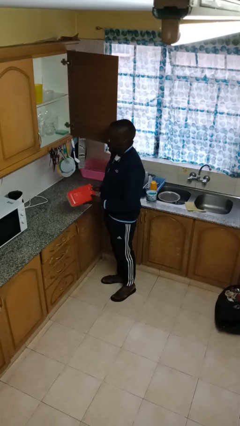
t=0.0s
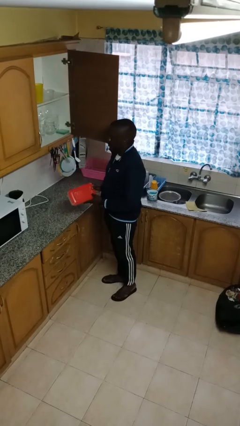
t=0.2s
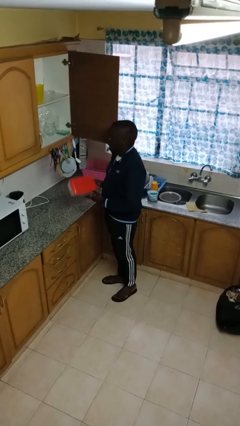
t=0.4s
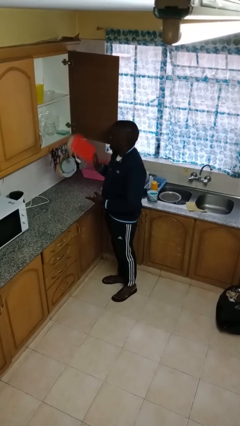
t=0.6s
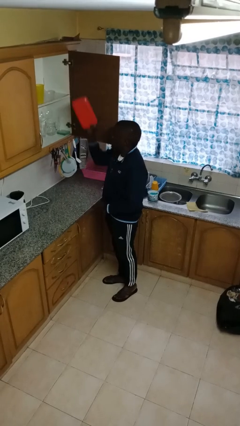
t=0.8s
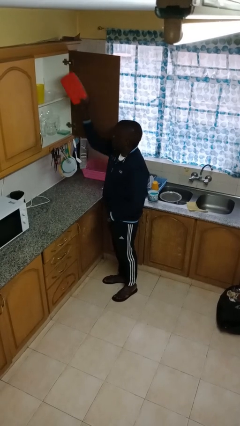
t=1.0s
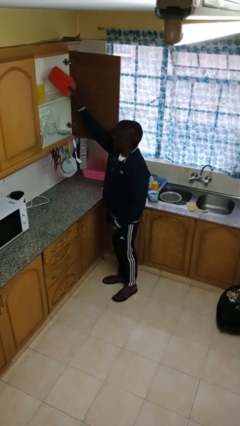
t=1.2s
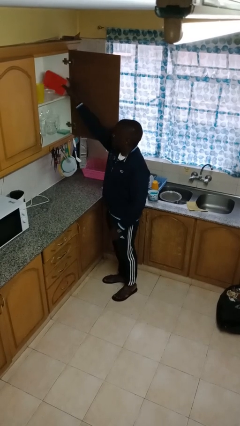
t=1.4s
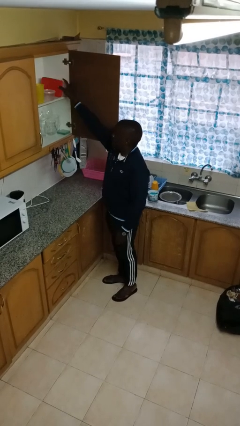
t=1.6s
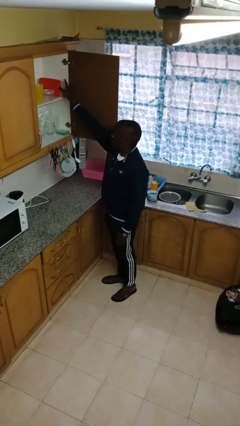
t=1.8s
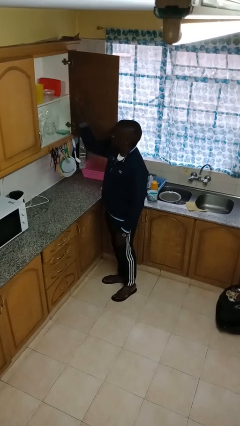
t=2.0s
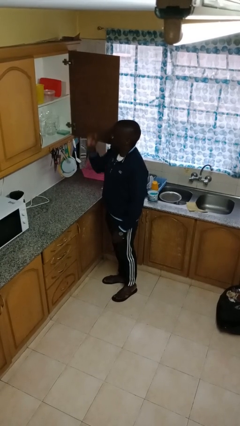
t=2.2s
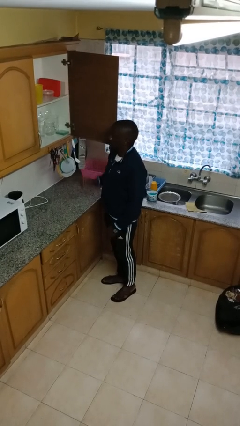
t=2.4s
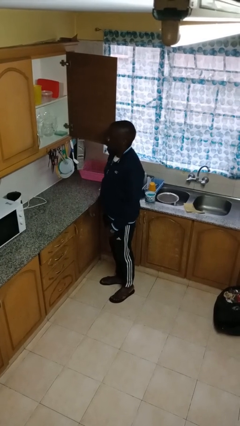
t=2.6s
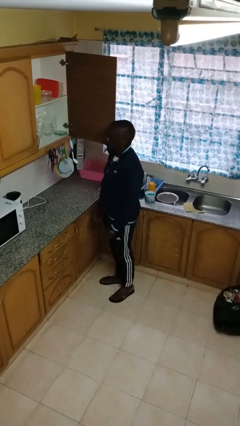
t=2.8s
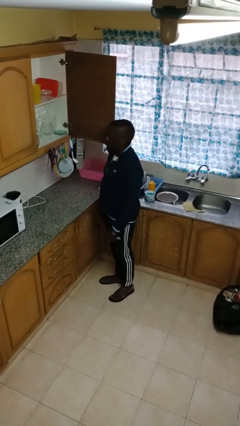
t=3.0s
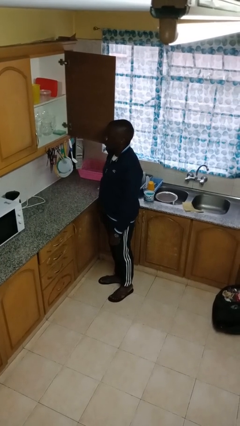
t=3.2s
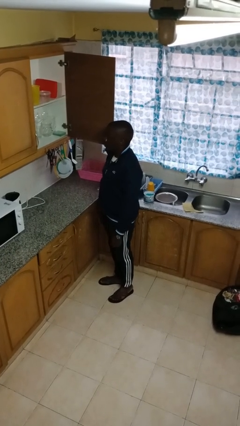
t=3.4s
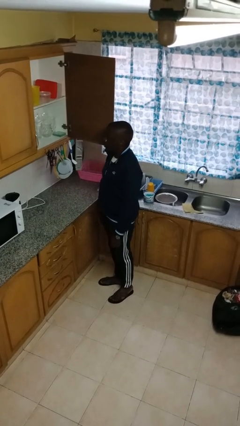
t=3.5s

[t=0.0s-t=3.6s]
person puts down object on shelf

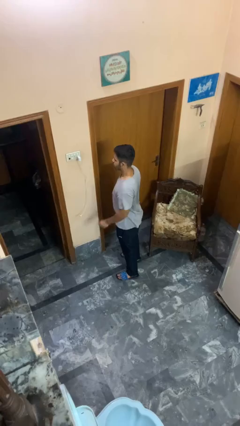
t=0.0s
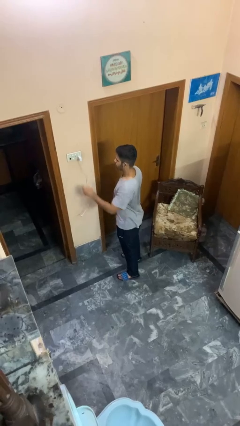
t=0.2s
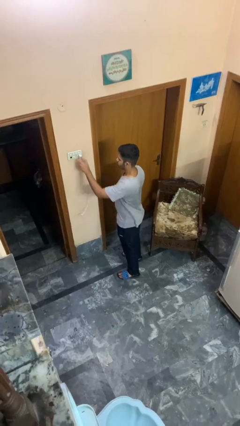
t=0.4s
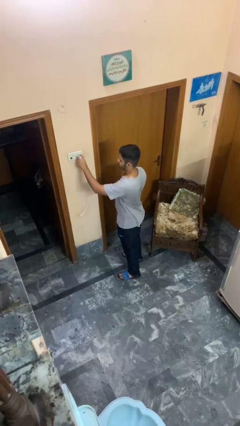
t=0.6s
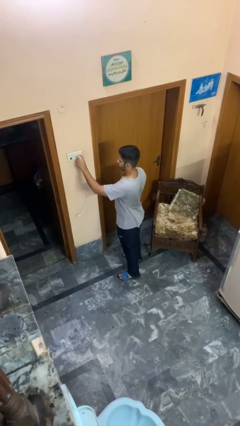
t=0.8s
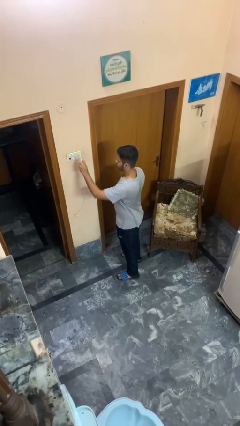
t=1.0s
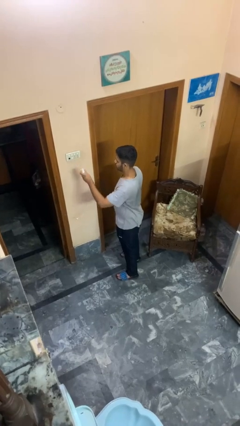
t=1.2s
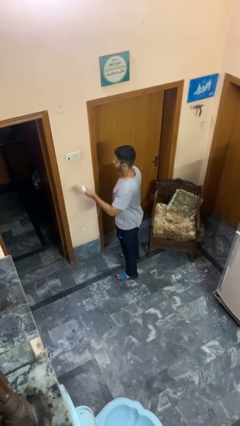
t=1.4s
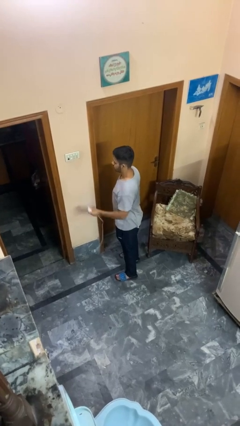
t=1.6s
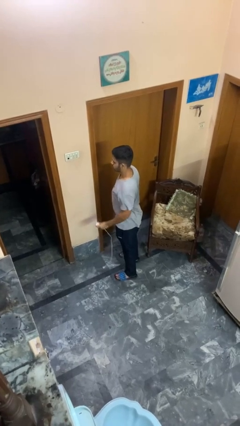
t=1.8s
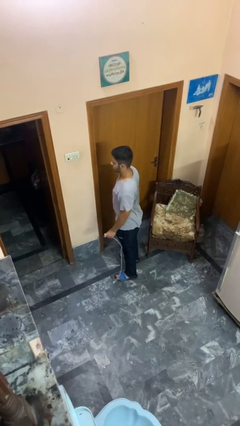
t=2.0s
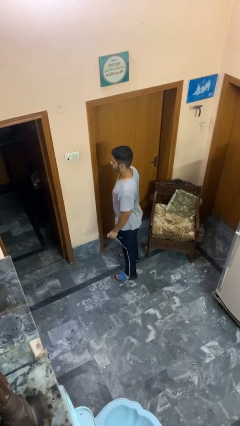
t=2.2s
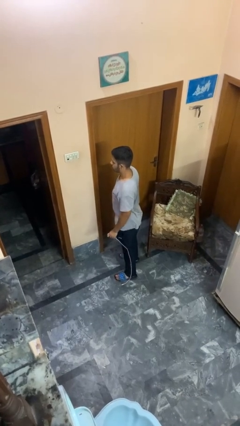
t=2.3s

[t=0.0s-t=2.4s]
person unplugs from electrical socket

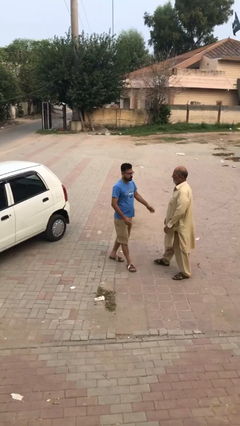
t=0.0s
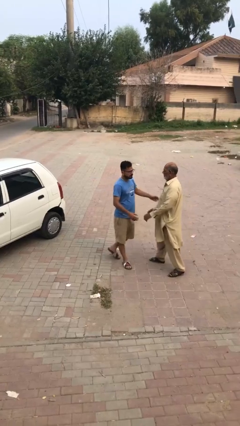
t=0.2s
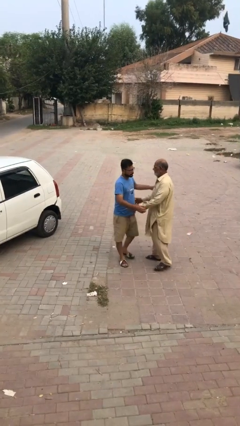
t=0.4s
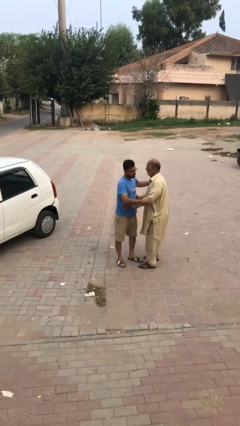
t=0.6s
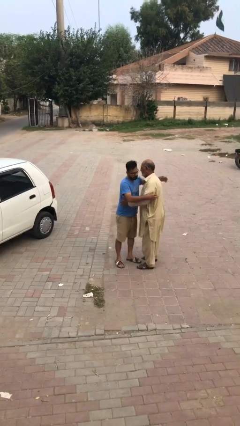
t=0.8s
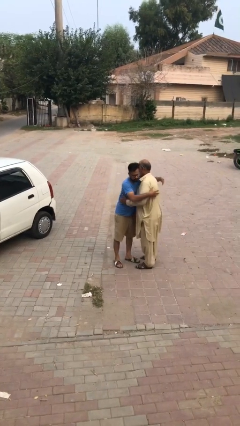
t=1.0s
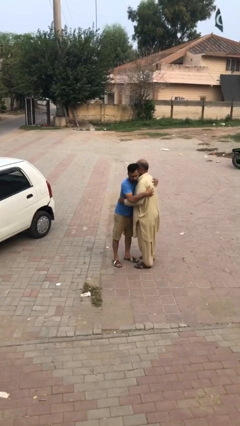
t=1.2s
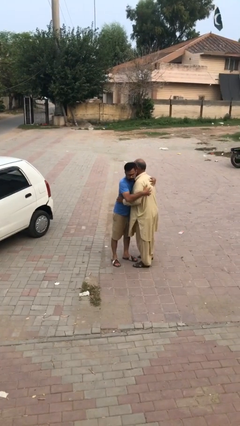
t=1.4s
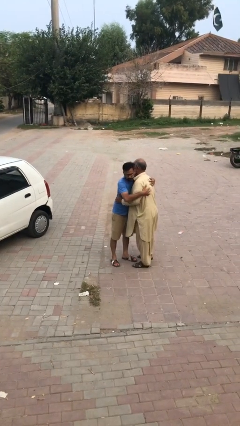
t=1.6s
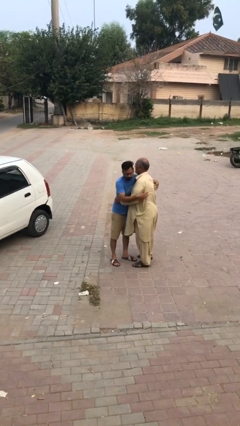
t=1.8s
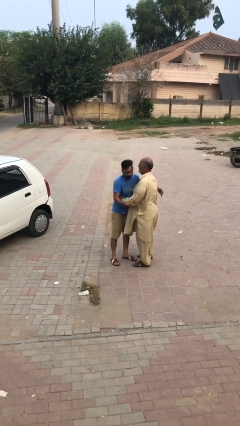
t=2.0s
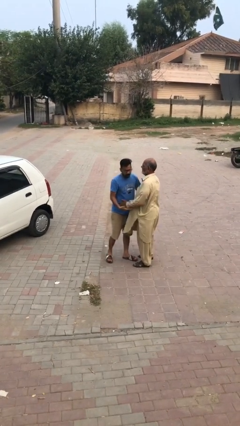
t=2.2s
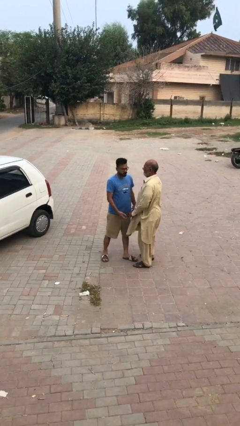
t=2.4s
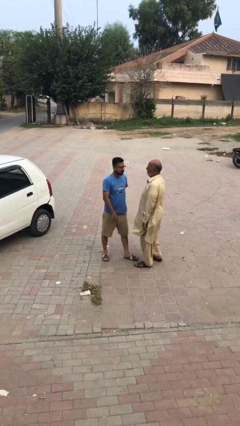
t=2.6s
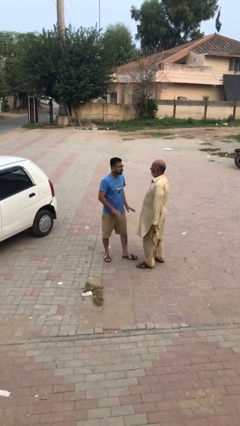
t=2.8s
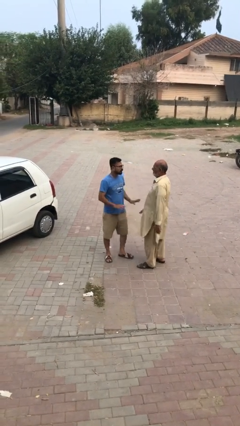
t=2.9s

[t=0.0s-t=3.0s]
person embraces person

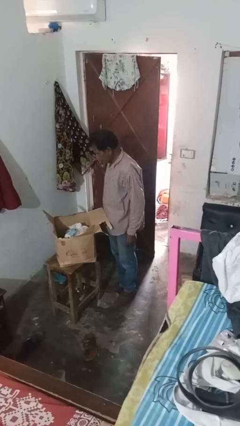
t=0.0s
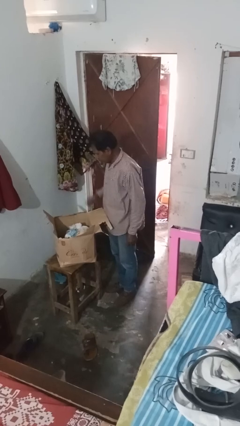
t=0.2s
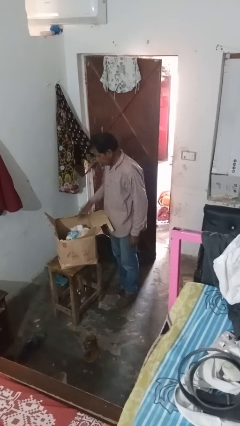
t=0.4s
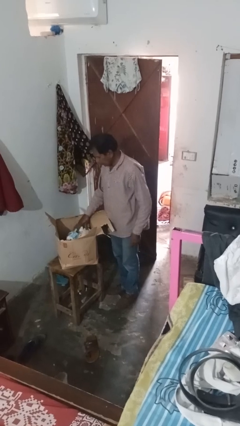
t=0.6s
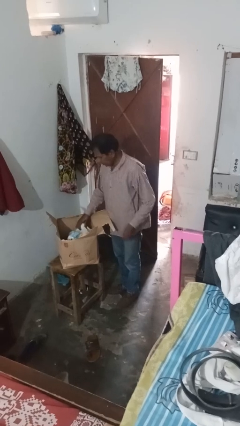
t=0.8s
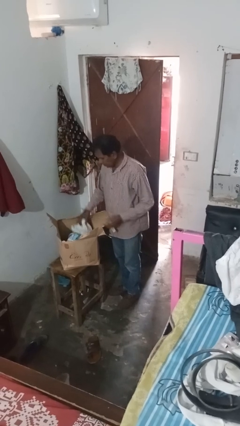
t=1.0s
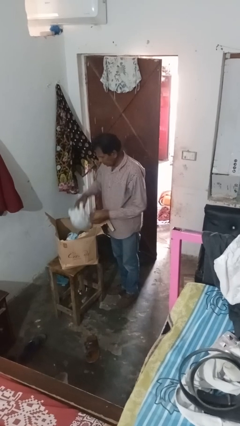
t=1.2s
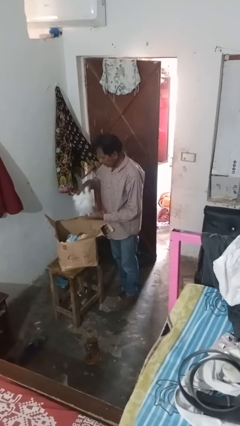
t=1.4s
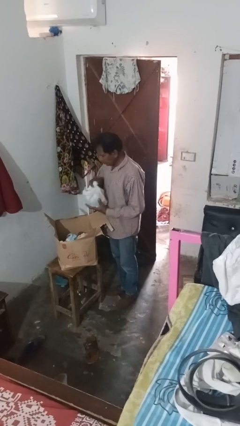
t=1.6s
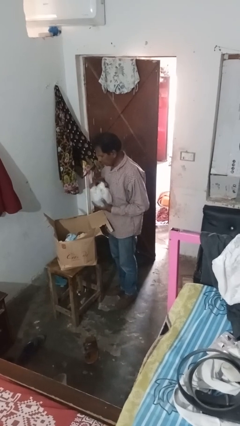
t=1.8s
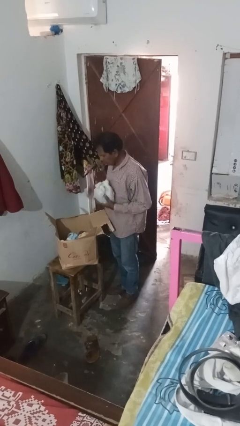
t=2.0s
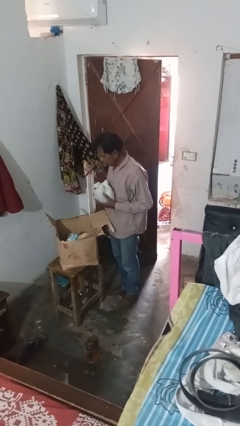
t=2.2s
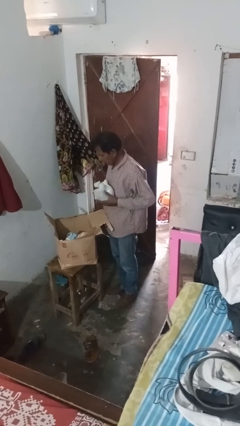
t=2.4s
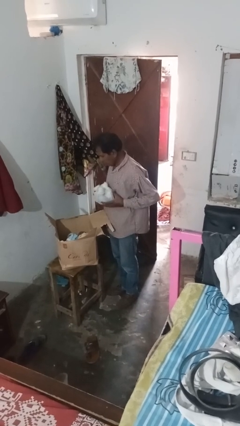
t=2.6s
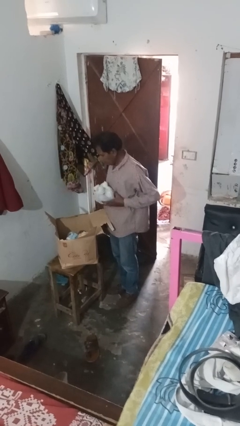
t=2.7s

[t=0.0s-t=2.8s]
person takes object from box

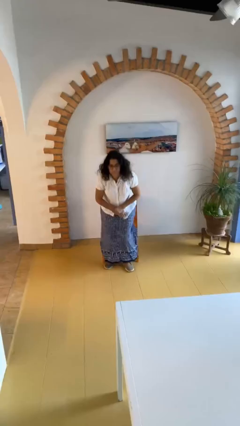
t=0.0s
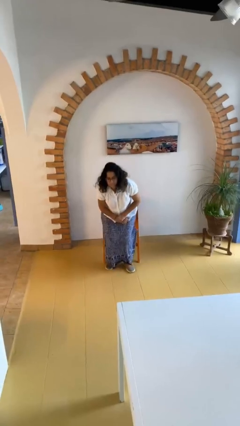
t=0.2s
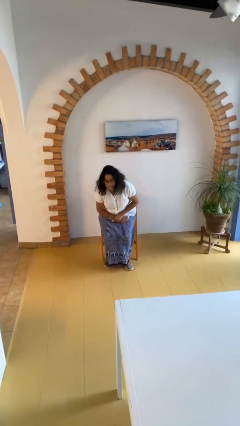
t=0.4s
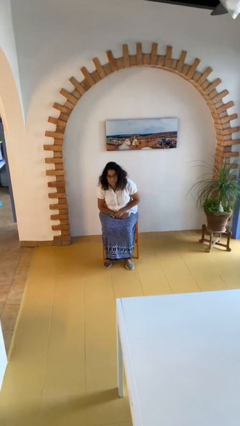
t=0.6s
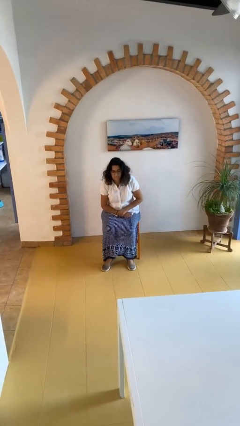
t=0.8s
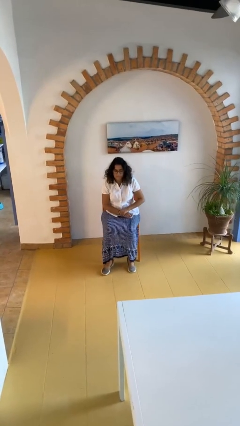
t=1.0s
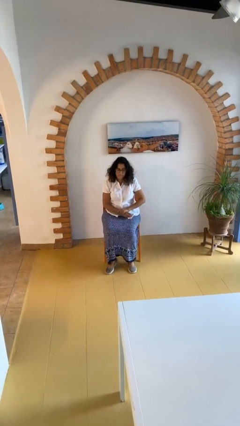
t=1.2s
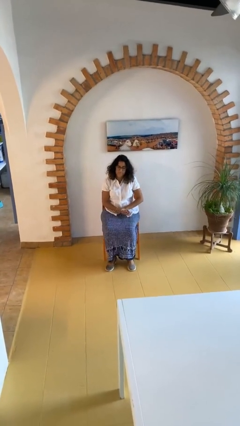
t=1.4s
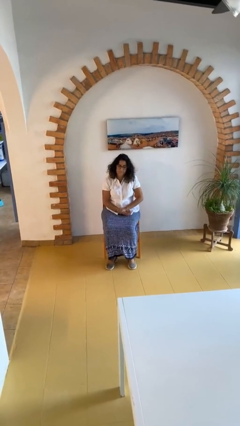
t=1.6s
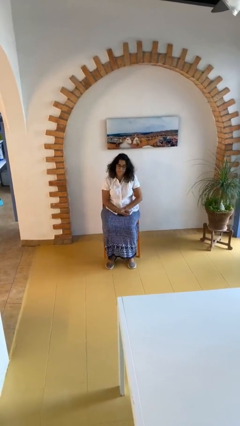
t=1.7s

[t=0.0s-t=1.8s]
person sits down

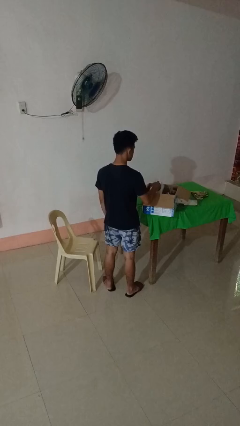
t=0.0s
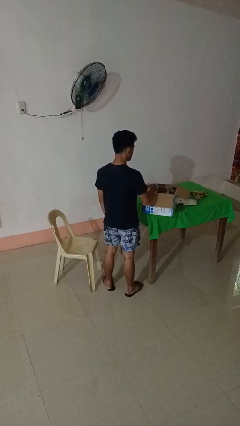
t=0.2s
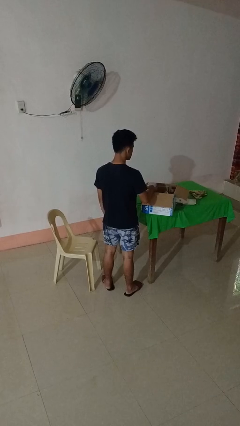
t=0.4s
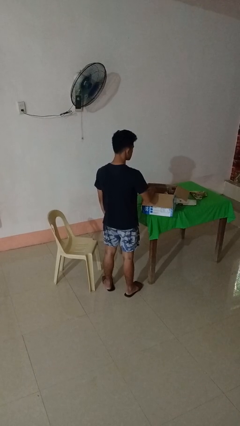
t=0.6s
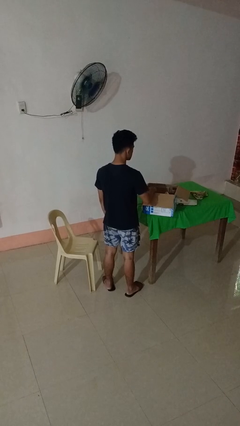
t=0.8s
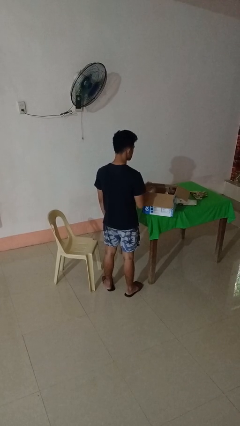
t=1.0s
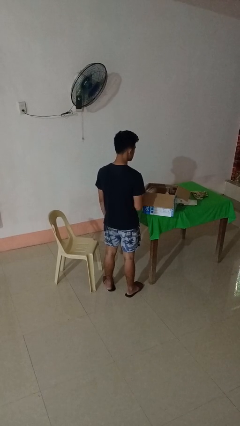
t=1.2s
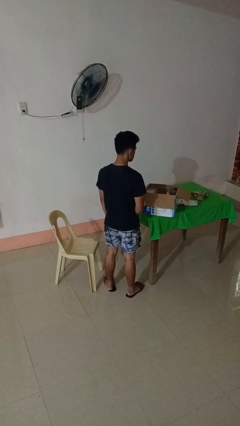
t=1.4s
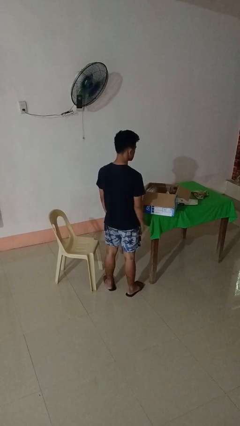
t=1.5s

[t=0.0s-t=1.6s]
person puts object into box

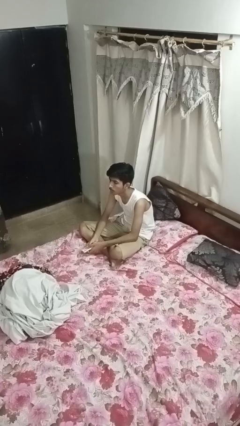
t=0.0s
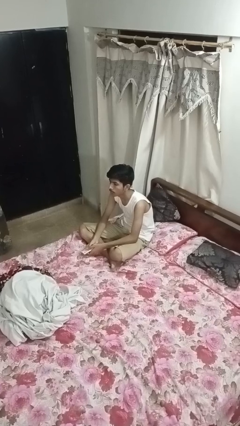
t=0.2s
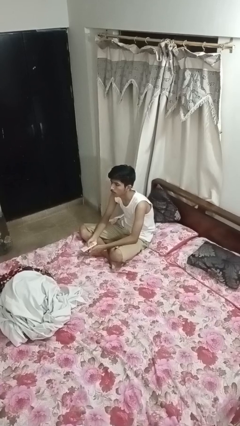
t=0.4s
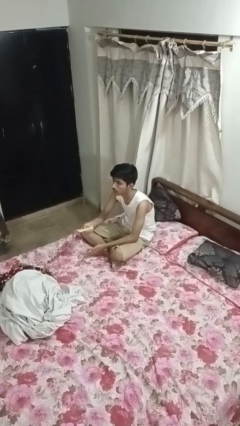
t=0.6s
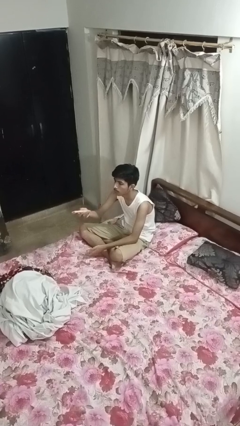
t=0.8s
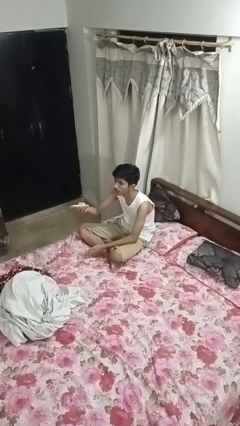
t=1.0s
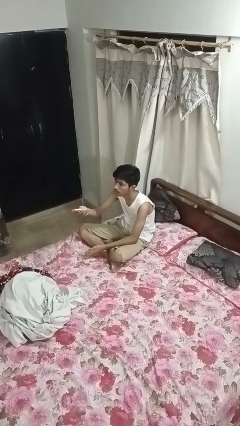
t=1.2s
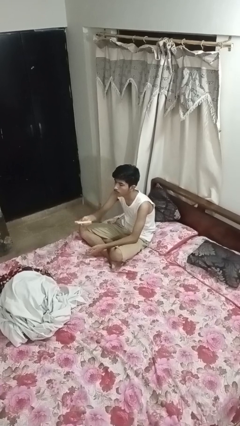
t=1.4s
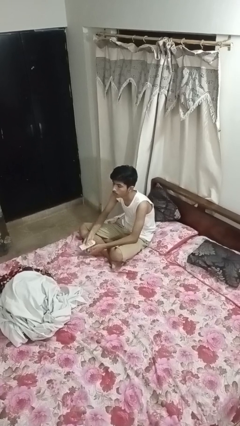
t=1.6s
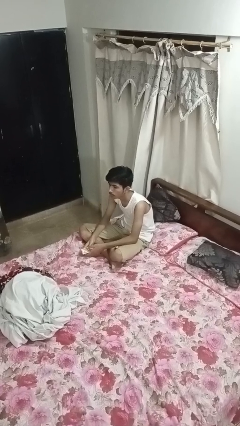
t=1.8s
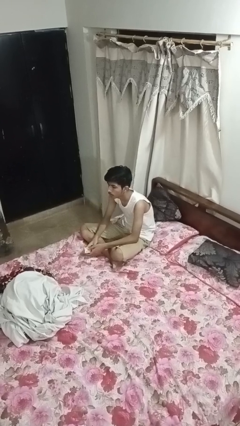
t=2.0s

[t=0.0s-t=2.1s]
person uses television remote

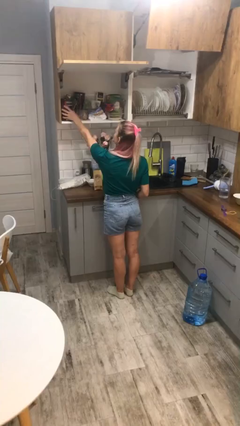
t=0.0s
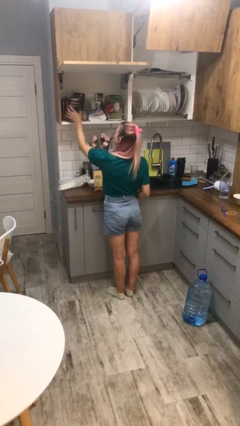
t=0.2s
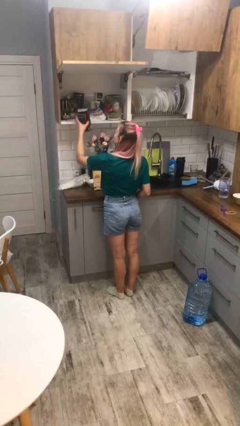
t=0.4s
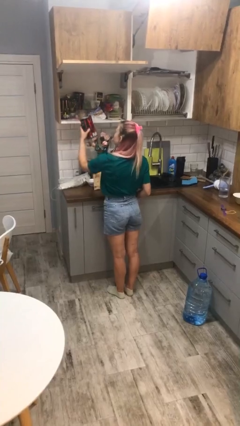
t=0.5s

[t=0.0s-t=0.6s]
person picks up object from cabinet
